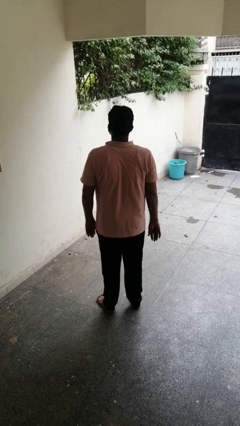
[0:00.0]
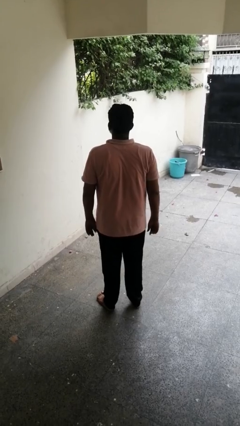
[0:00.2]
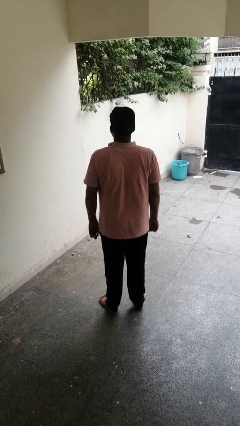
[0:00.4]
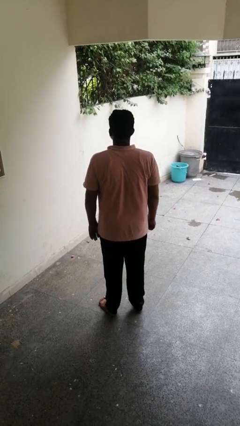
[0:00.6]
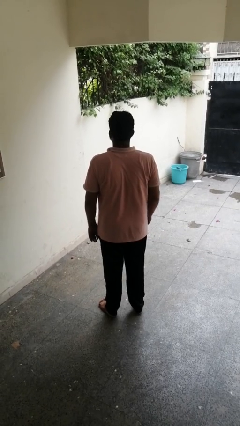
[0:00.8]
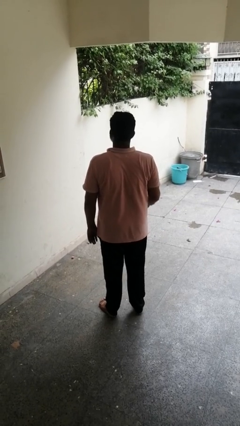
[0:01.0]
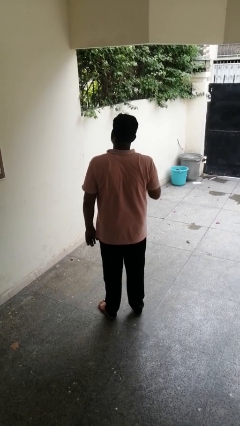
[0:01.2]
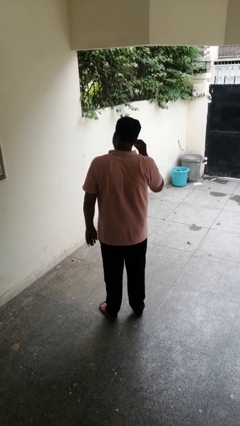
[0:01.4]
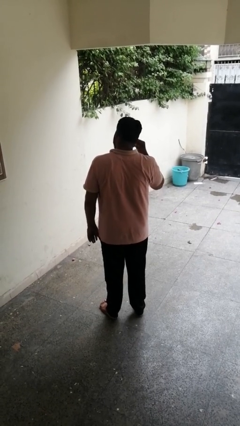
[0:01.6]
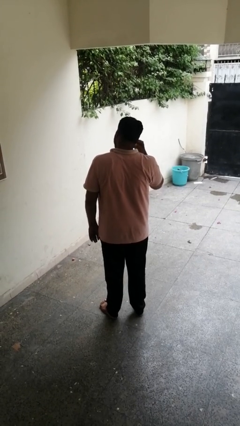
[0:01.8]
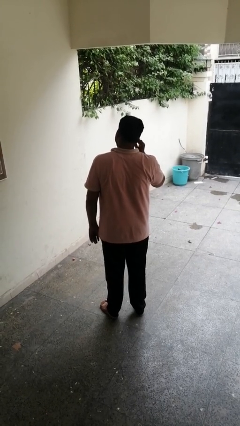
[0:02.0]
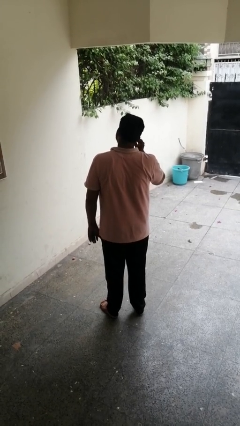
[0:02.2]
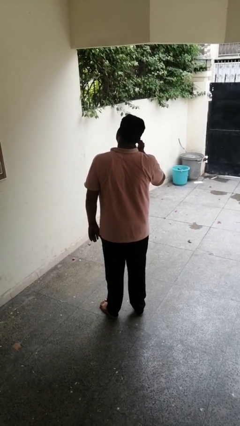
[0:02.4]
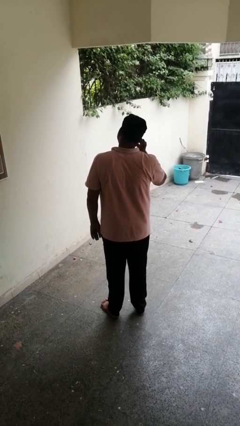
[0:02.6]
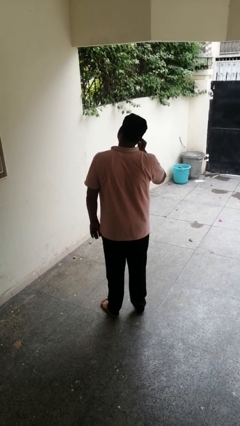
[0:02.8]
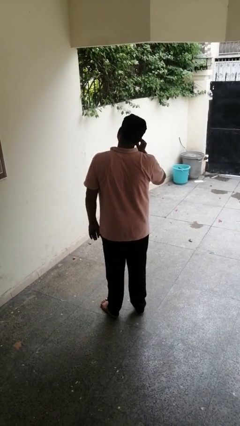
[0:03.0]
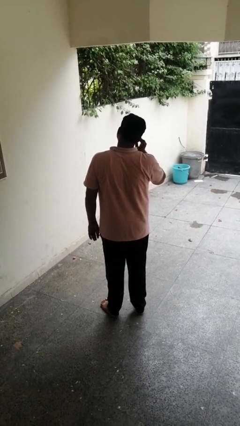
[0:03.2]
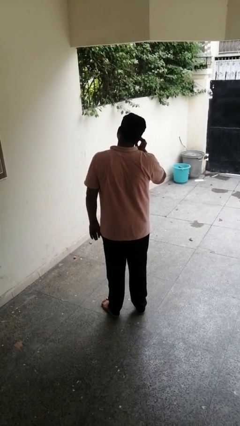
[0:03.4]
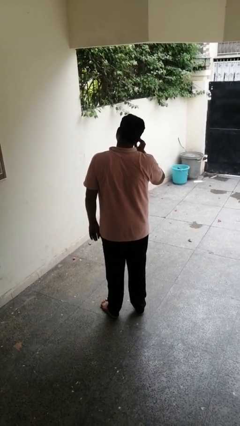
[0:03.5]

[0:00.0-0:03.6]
person touches earlobe

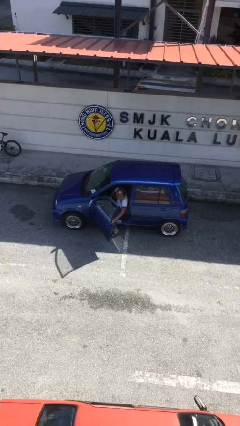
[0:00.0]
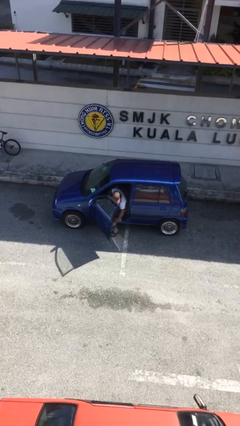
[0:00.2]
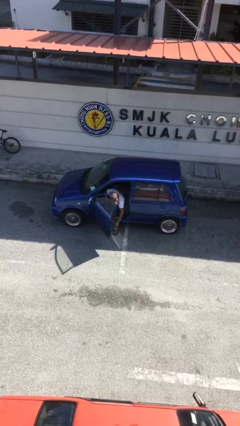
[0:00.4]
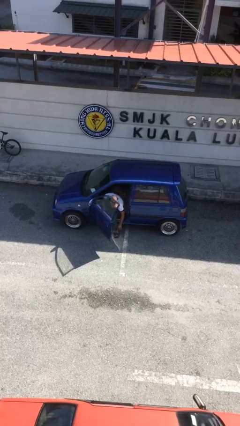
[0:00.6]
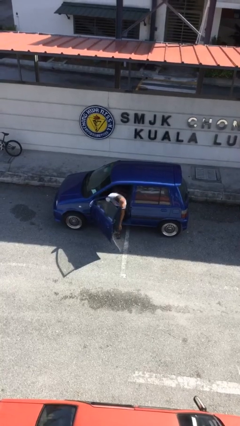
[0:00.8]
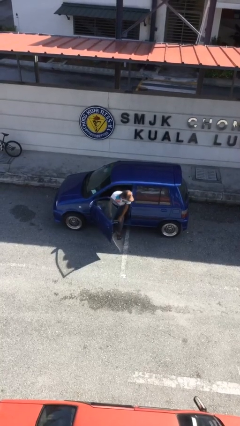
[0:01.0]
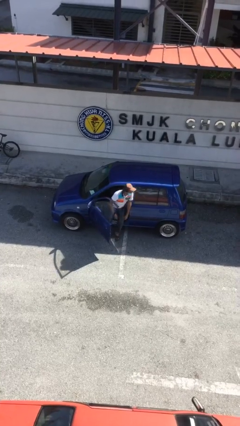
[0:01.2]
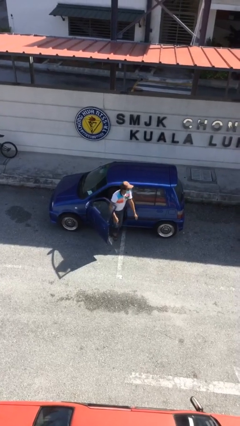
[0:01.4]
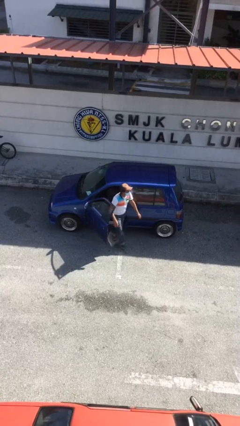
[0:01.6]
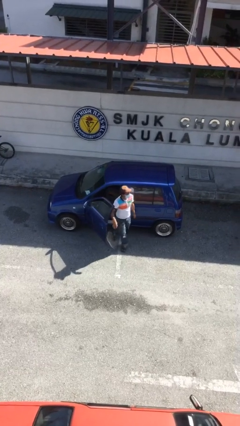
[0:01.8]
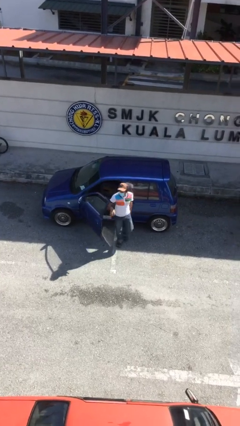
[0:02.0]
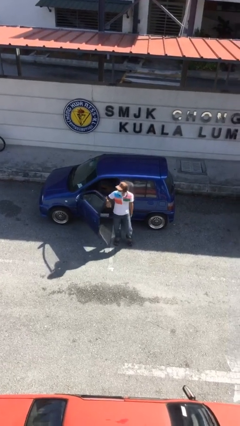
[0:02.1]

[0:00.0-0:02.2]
person exits car

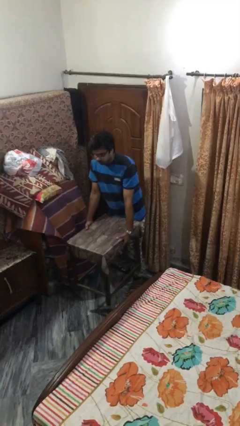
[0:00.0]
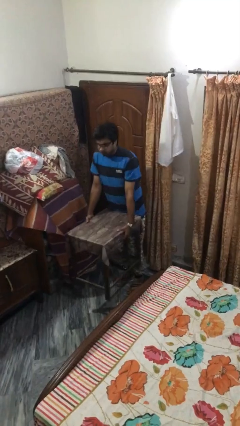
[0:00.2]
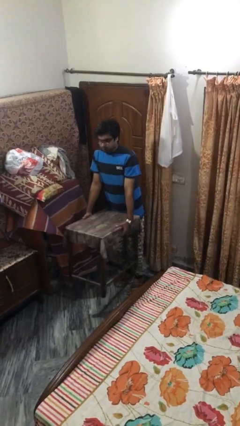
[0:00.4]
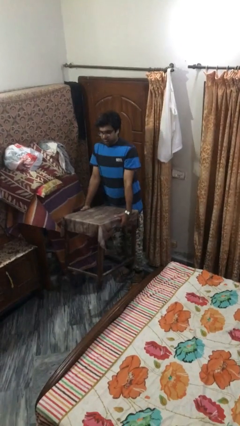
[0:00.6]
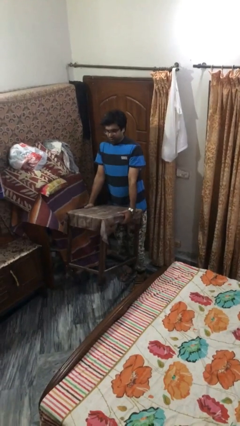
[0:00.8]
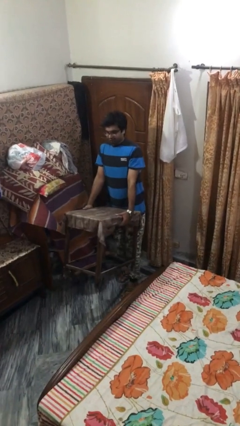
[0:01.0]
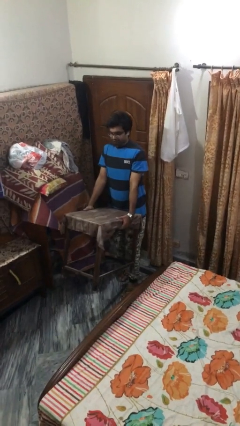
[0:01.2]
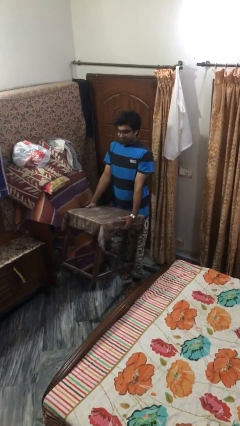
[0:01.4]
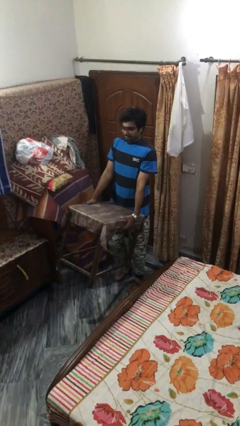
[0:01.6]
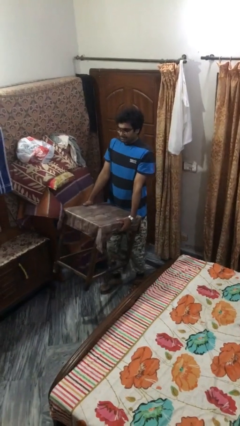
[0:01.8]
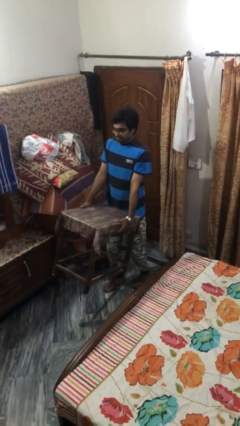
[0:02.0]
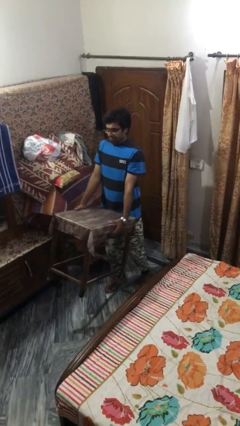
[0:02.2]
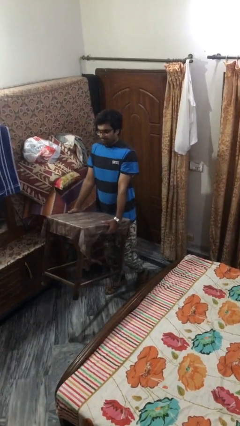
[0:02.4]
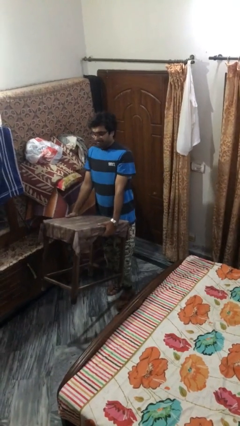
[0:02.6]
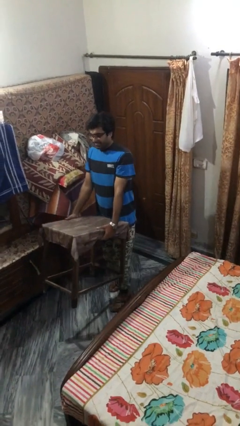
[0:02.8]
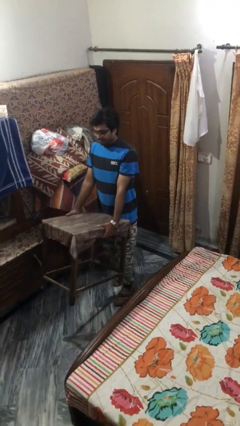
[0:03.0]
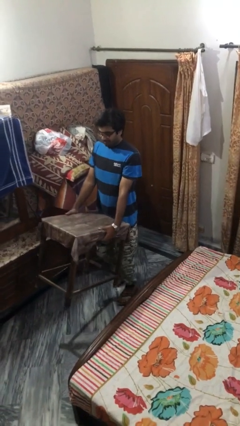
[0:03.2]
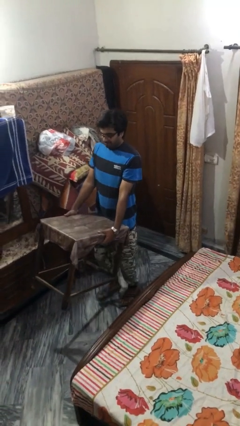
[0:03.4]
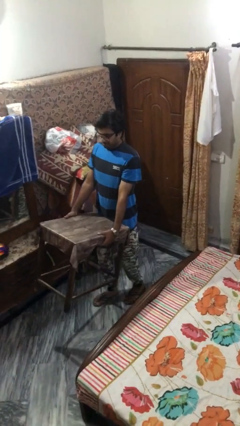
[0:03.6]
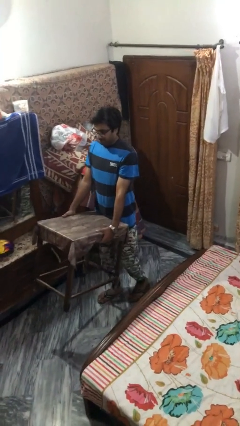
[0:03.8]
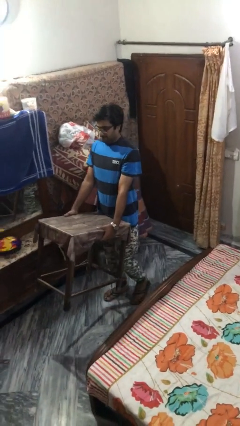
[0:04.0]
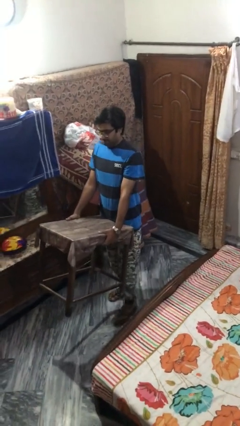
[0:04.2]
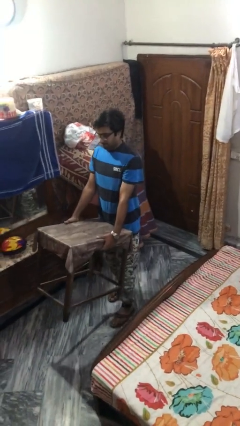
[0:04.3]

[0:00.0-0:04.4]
person carries heavy object

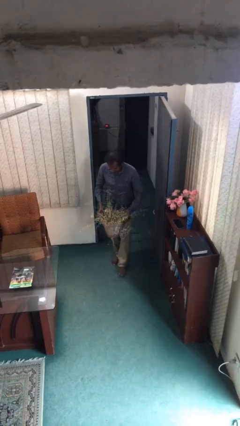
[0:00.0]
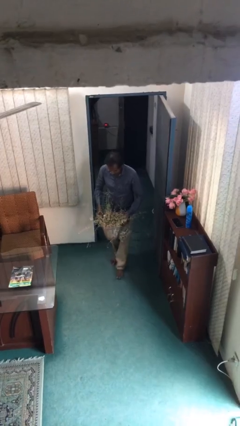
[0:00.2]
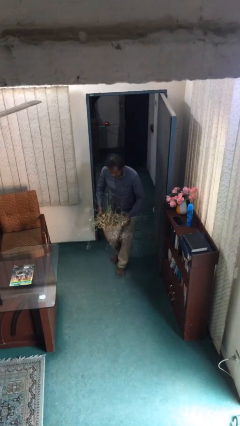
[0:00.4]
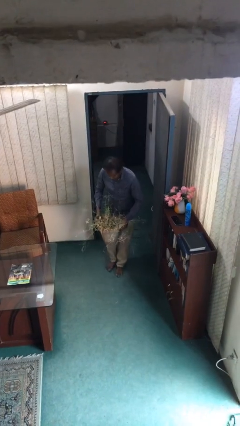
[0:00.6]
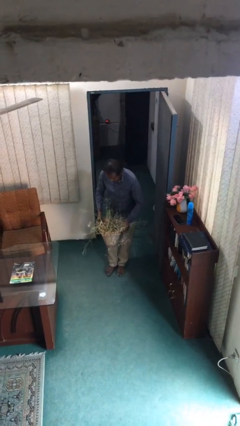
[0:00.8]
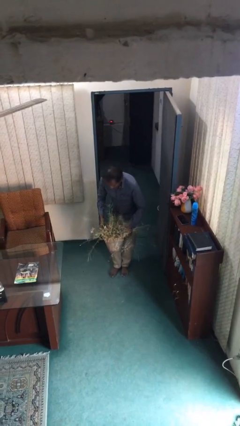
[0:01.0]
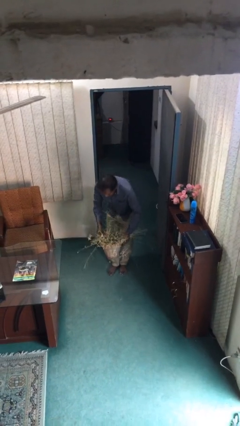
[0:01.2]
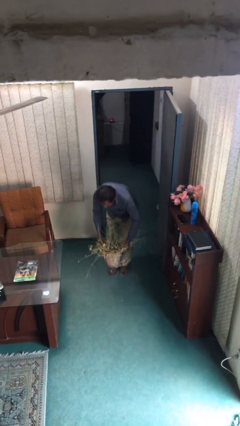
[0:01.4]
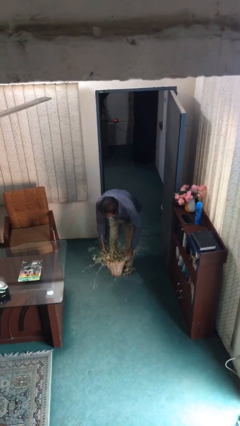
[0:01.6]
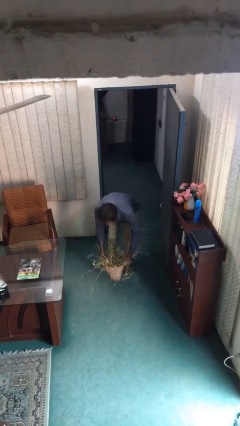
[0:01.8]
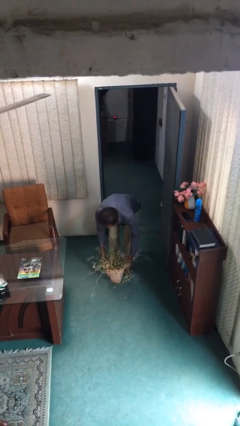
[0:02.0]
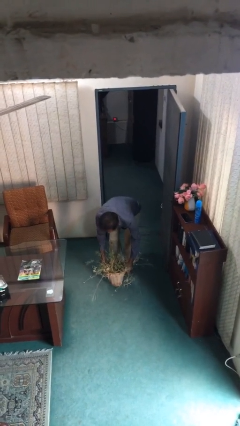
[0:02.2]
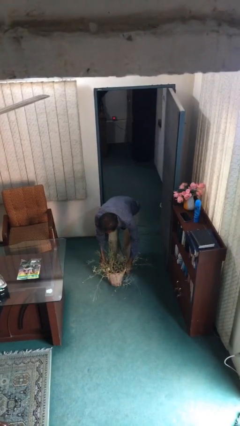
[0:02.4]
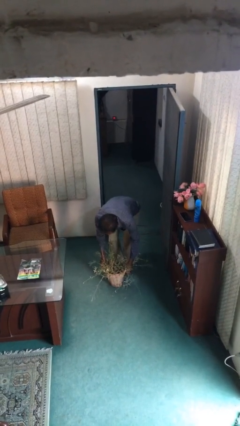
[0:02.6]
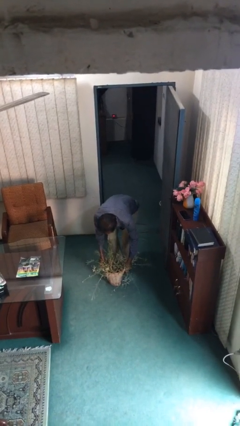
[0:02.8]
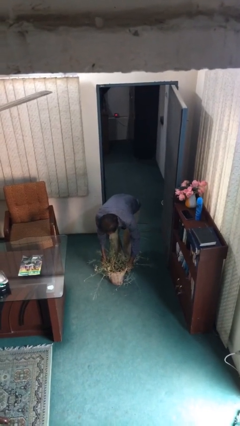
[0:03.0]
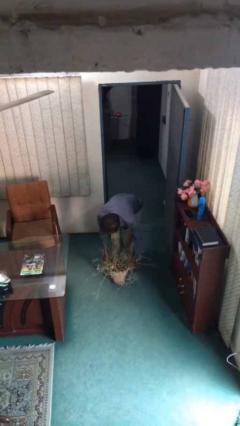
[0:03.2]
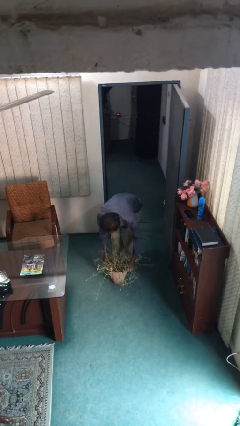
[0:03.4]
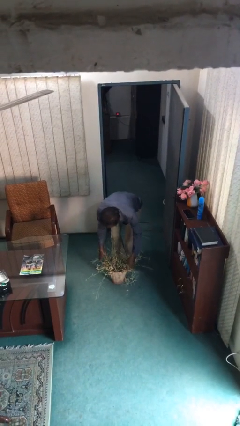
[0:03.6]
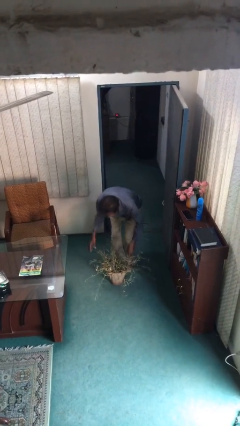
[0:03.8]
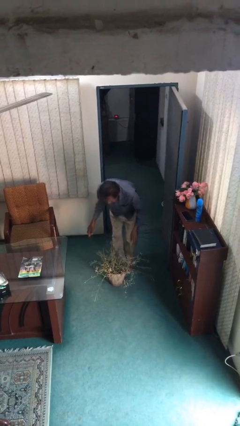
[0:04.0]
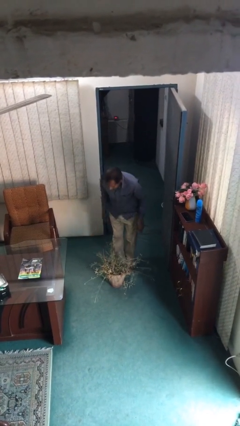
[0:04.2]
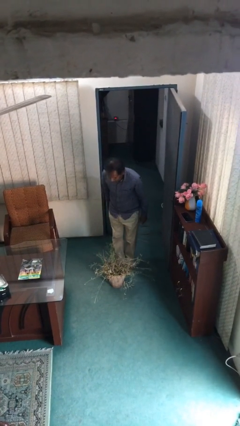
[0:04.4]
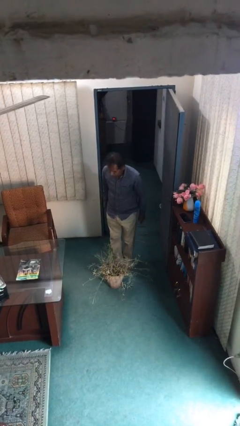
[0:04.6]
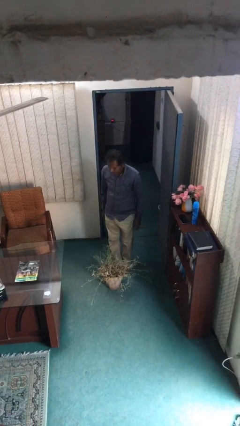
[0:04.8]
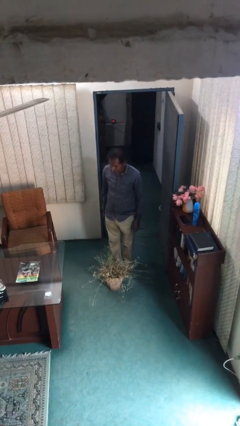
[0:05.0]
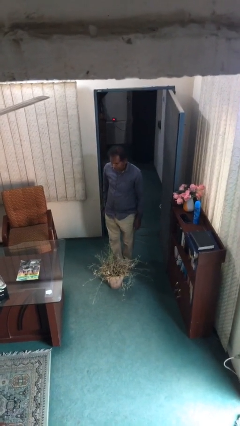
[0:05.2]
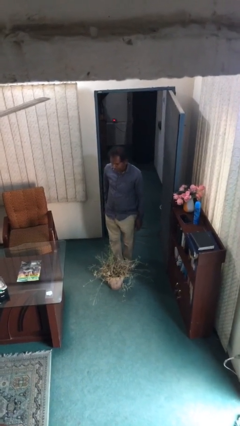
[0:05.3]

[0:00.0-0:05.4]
person puts down object on floor

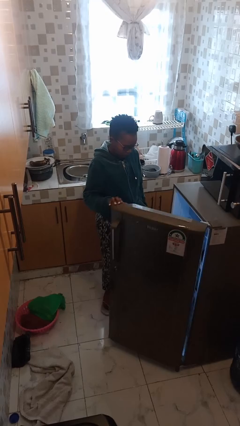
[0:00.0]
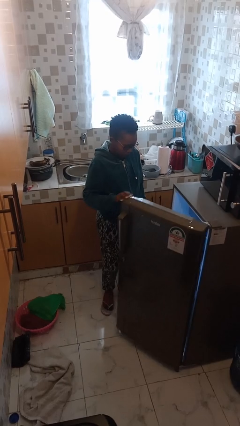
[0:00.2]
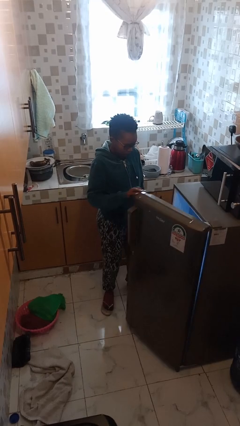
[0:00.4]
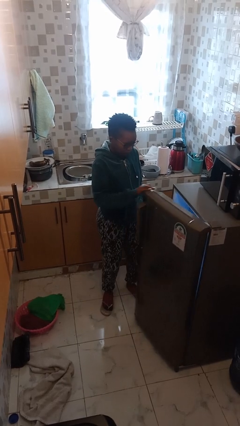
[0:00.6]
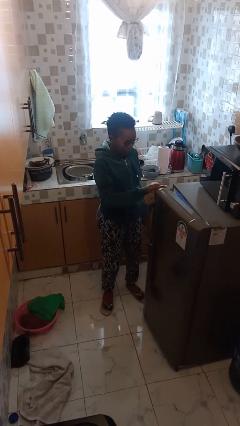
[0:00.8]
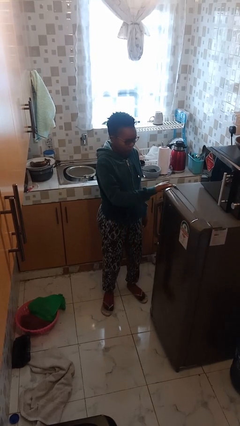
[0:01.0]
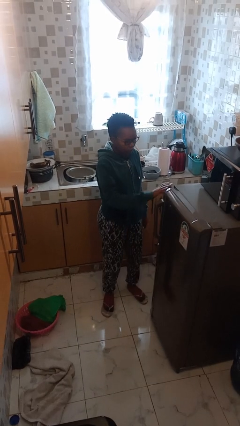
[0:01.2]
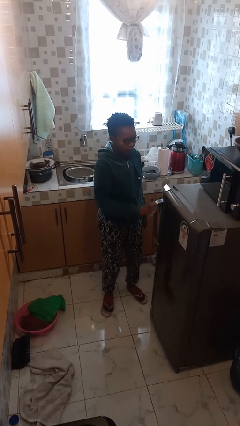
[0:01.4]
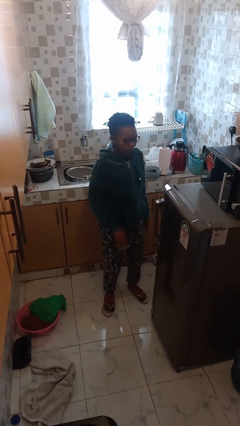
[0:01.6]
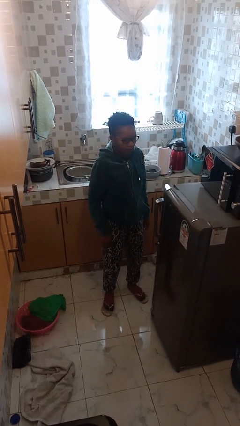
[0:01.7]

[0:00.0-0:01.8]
person closes refrigerator
